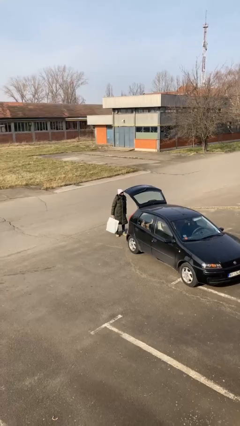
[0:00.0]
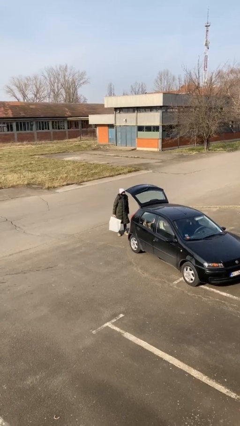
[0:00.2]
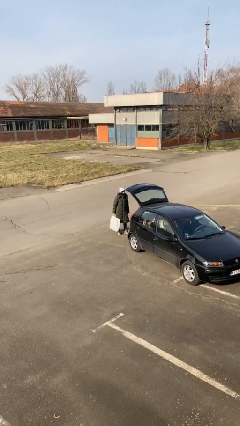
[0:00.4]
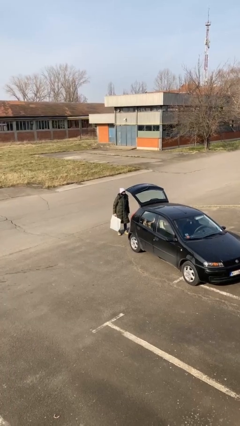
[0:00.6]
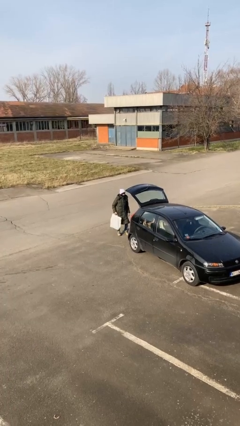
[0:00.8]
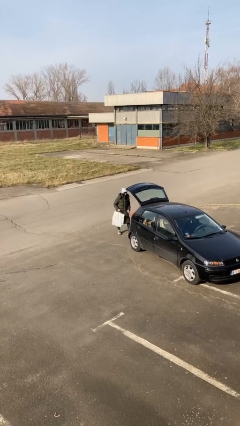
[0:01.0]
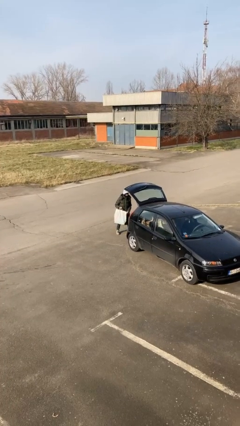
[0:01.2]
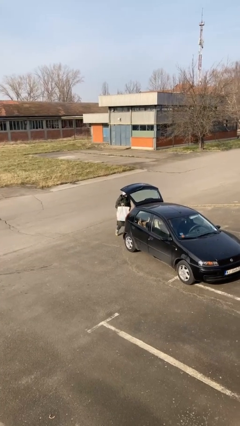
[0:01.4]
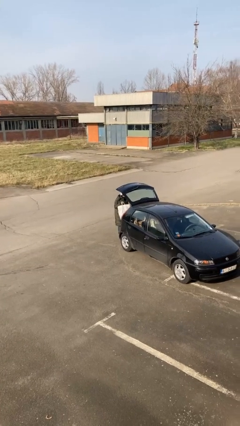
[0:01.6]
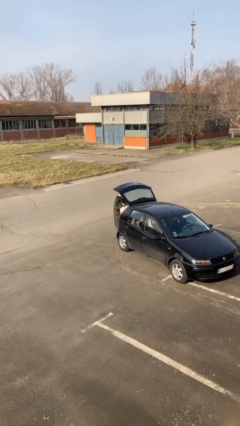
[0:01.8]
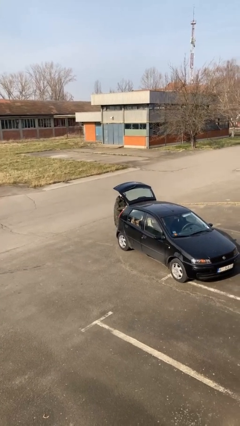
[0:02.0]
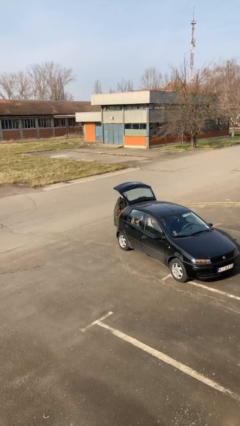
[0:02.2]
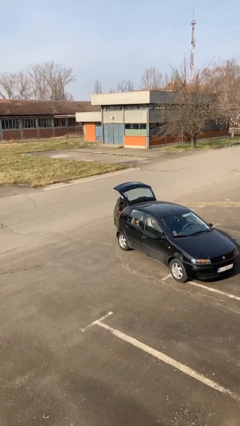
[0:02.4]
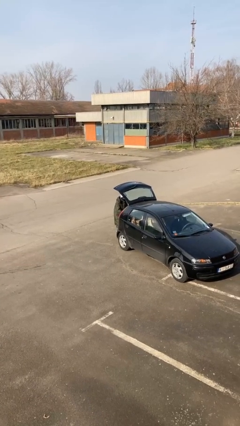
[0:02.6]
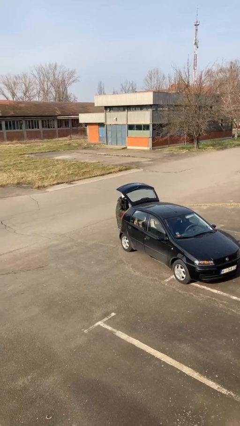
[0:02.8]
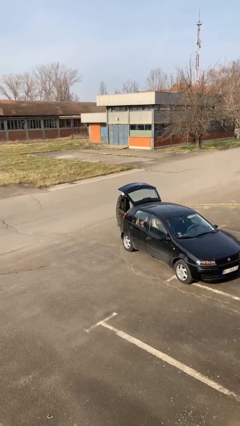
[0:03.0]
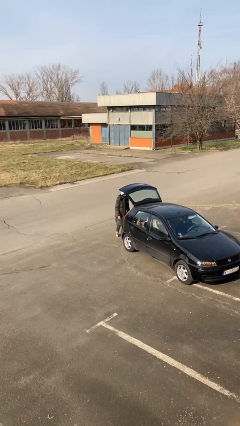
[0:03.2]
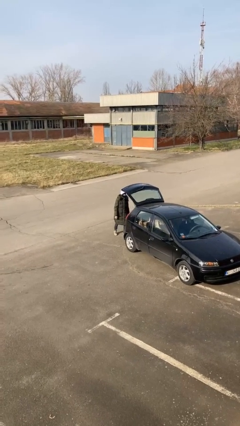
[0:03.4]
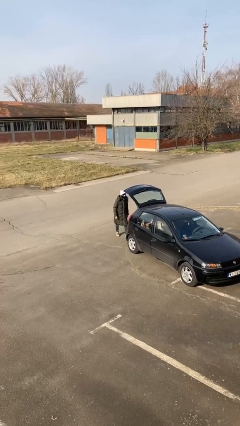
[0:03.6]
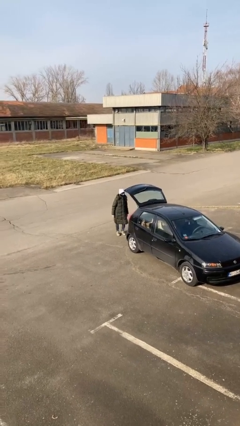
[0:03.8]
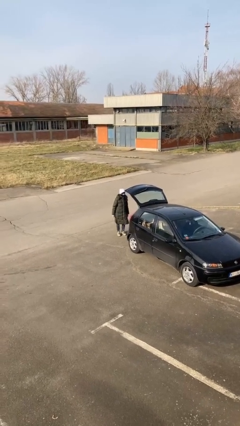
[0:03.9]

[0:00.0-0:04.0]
person loads car

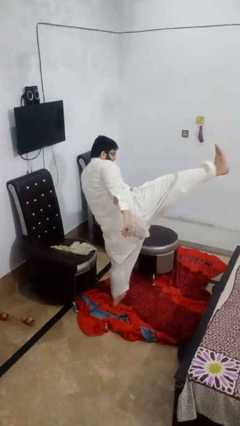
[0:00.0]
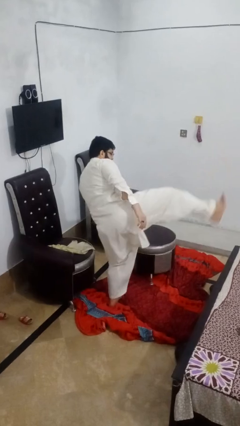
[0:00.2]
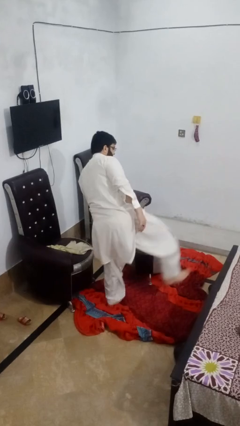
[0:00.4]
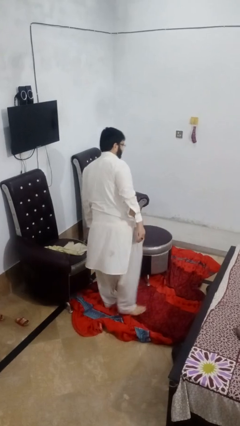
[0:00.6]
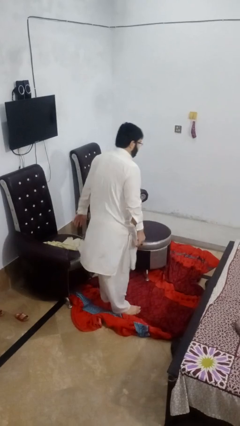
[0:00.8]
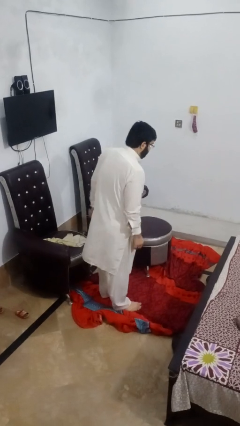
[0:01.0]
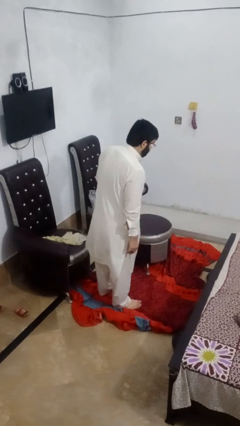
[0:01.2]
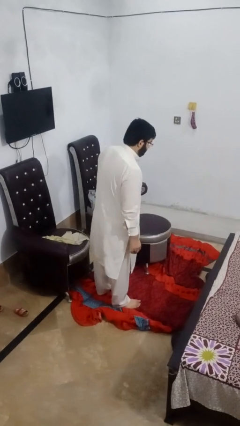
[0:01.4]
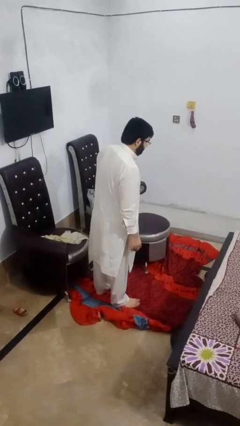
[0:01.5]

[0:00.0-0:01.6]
person karate kicks

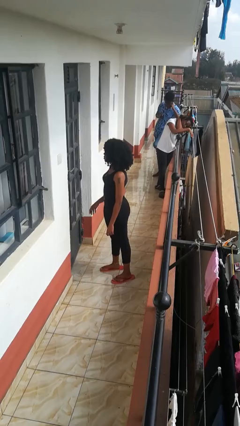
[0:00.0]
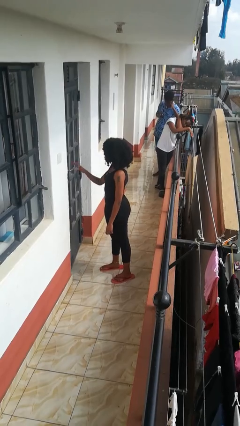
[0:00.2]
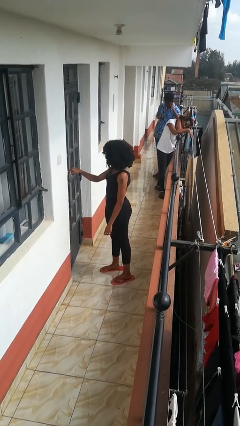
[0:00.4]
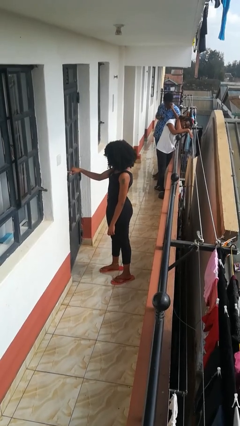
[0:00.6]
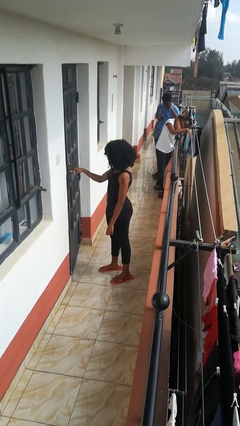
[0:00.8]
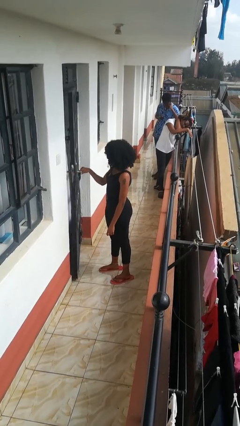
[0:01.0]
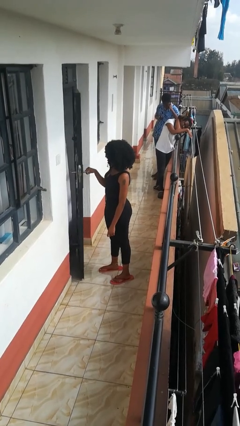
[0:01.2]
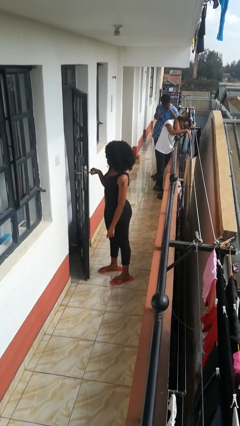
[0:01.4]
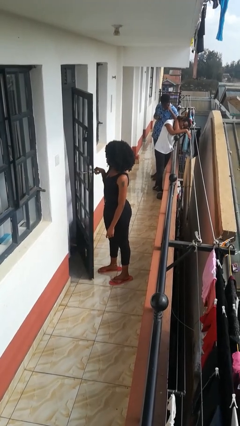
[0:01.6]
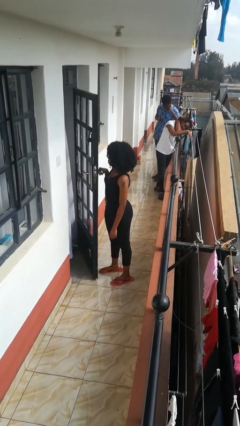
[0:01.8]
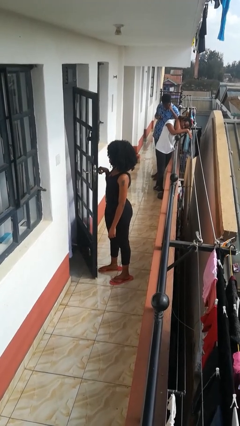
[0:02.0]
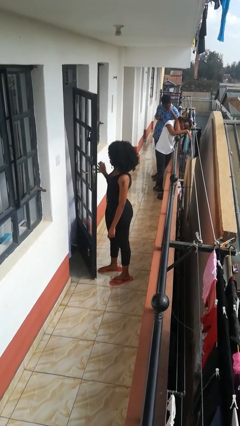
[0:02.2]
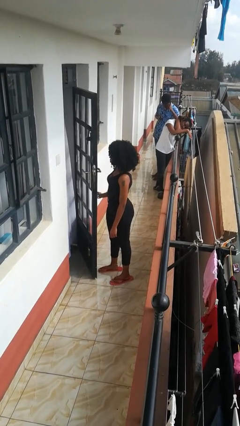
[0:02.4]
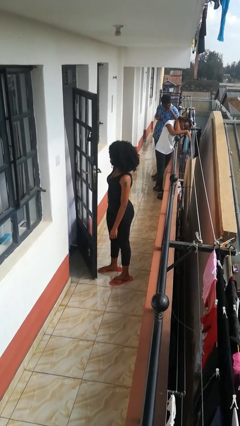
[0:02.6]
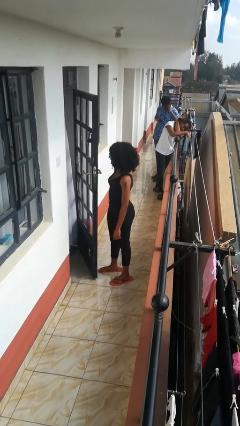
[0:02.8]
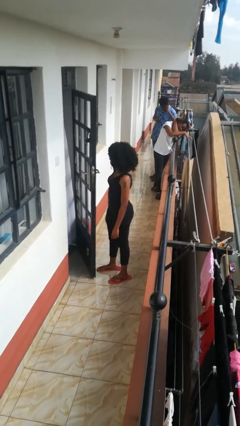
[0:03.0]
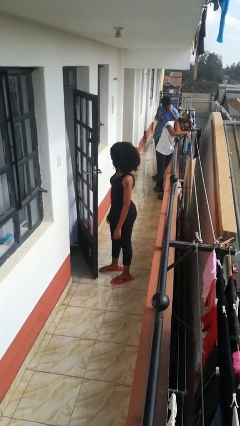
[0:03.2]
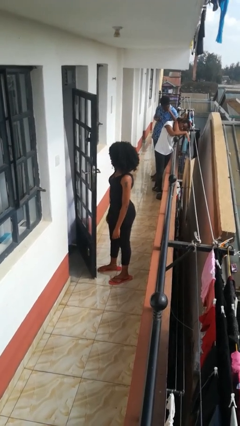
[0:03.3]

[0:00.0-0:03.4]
person opens facility door

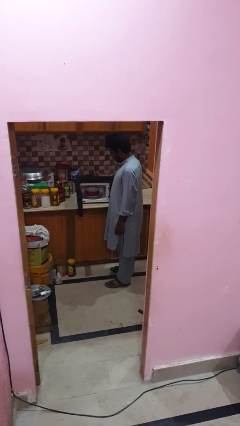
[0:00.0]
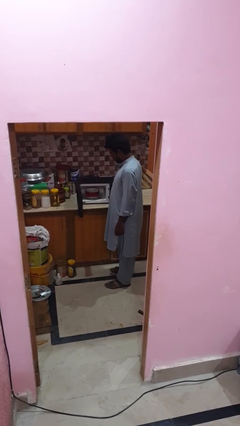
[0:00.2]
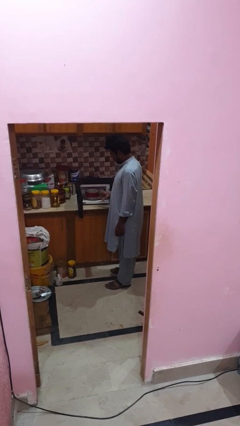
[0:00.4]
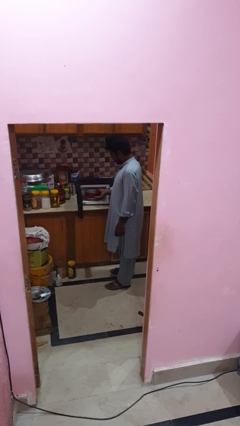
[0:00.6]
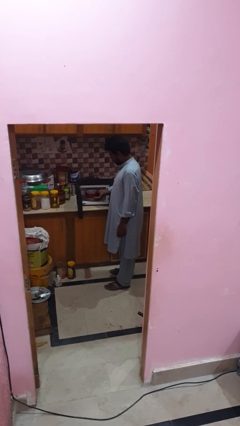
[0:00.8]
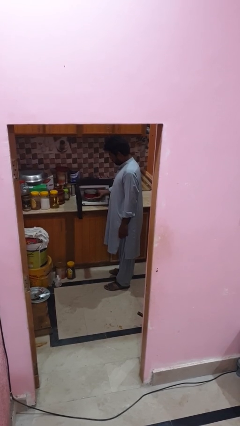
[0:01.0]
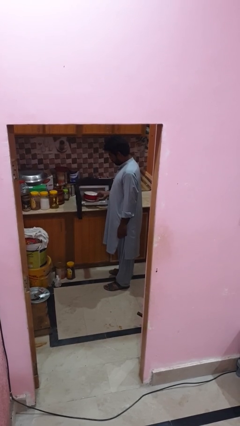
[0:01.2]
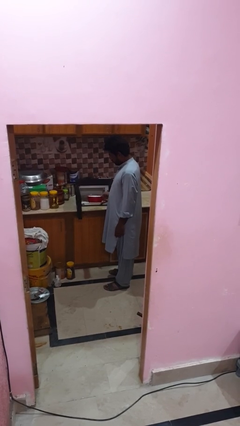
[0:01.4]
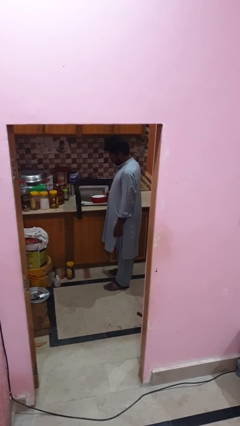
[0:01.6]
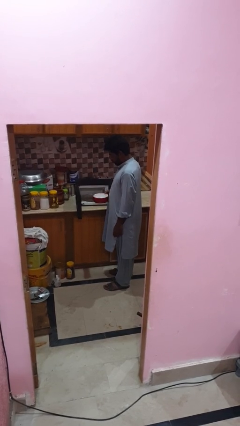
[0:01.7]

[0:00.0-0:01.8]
person takes object from microwave

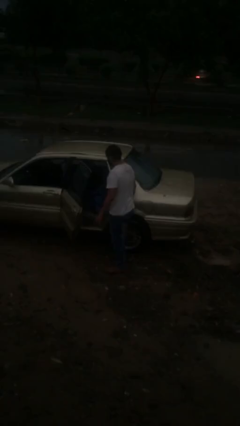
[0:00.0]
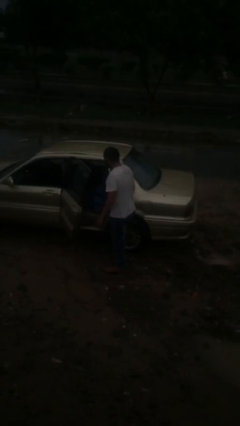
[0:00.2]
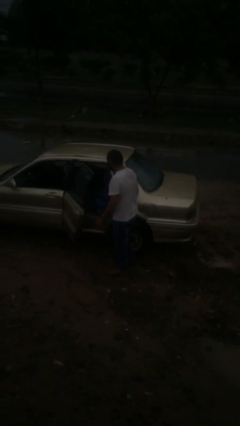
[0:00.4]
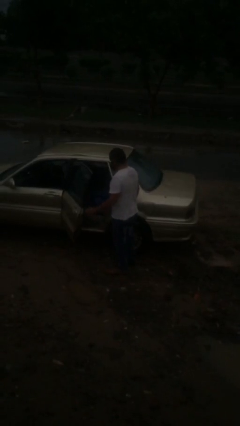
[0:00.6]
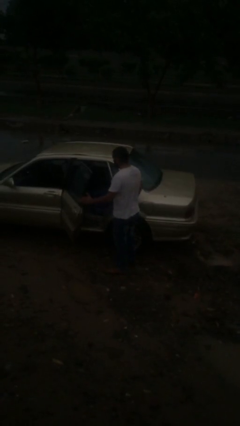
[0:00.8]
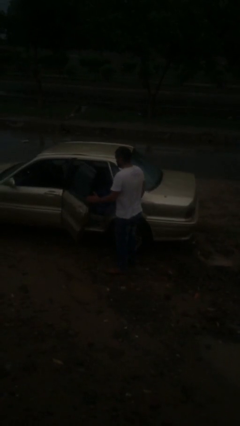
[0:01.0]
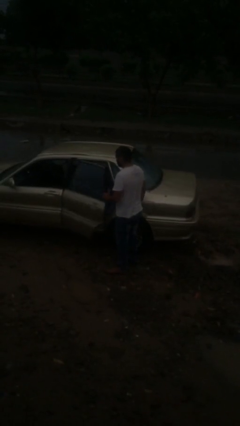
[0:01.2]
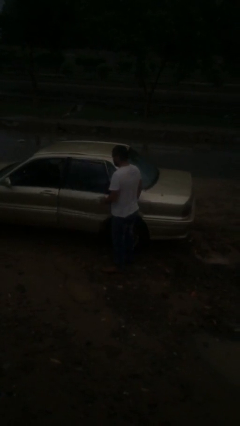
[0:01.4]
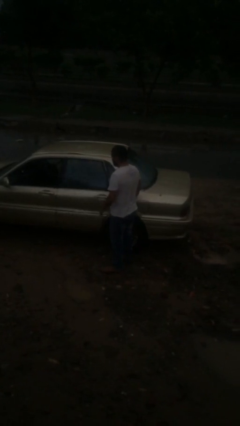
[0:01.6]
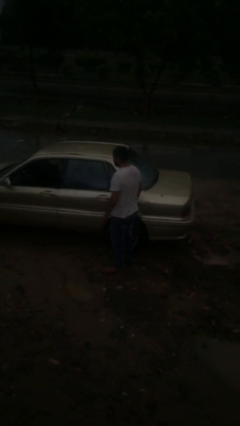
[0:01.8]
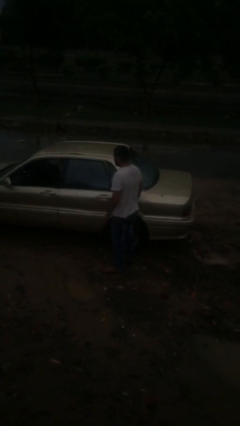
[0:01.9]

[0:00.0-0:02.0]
person closes car door

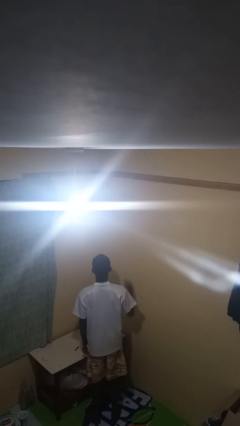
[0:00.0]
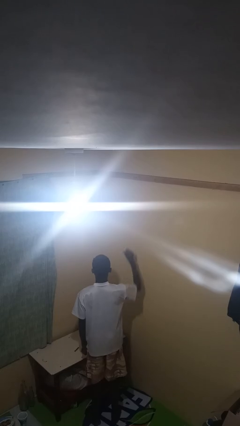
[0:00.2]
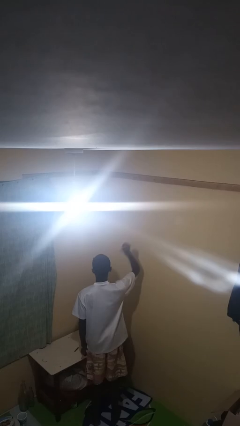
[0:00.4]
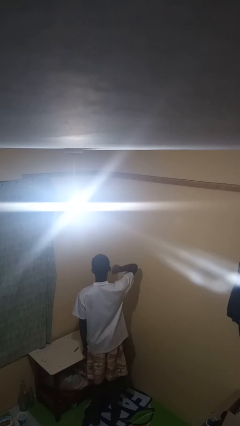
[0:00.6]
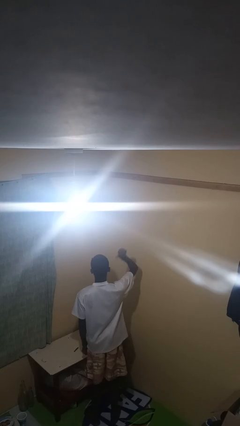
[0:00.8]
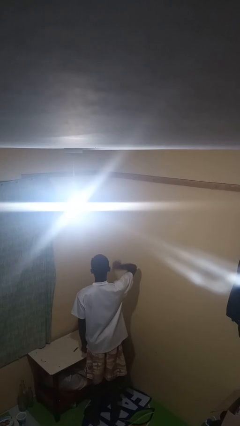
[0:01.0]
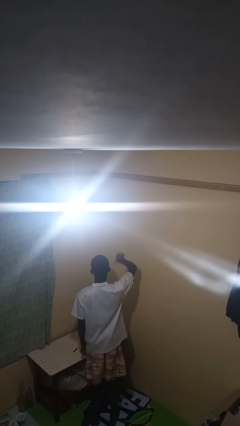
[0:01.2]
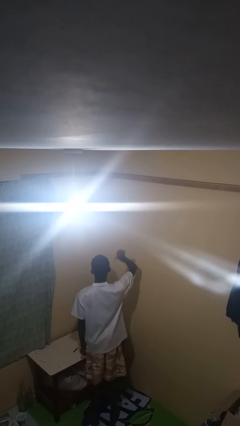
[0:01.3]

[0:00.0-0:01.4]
person gestures behind me

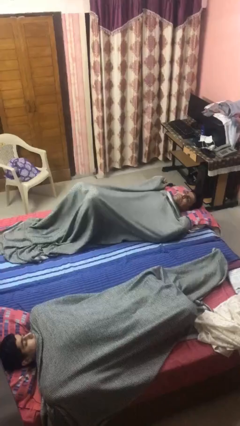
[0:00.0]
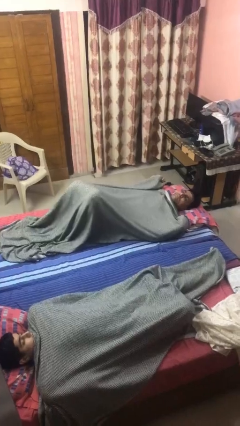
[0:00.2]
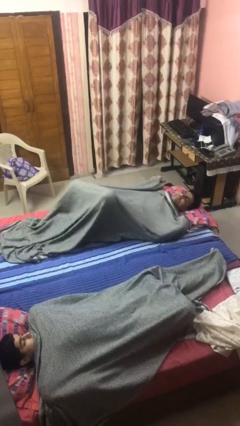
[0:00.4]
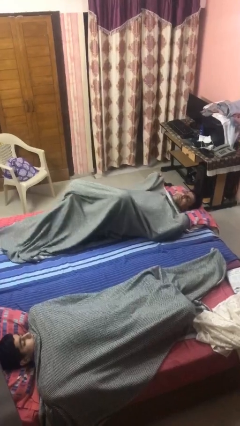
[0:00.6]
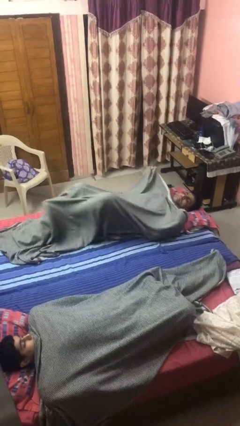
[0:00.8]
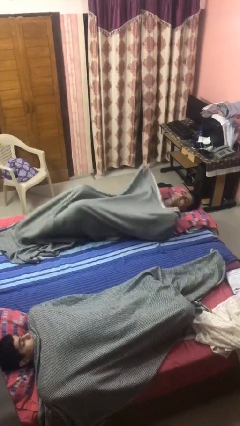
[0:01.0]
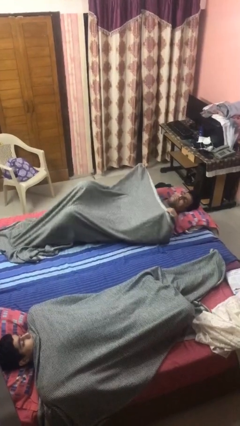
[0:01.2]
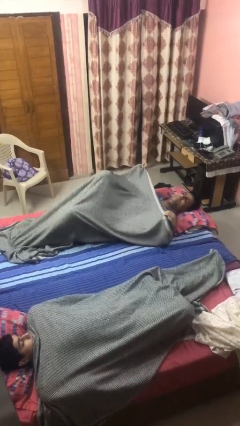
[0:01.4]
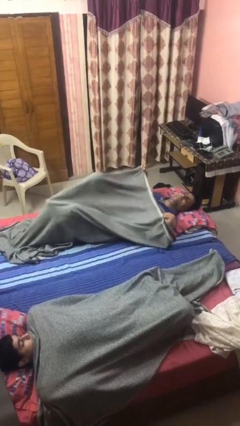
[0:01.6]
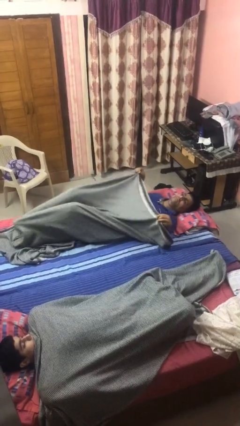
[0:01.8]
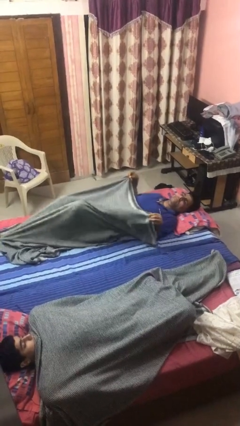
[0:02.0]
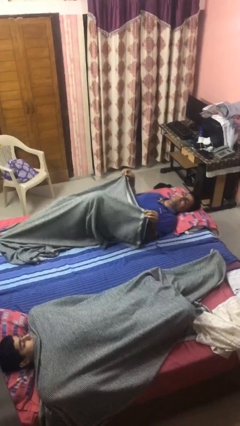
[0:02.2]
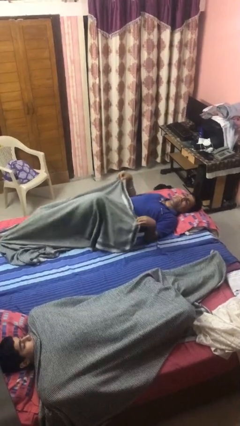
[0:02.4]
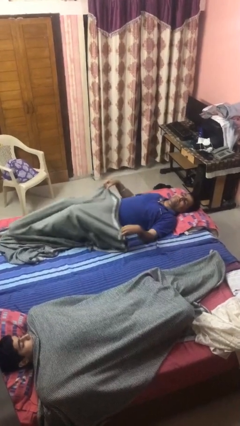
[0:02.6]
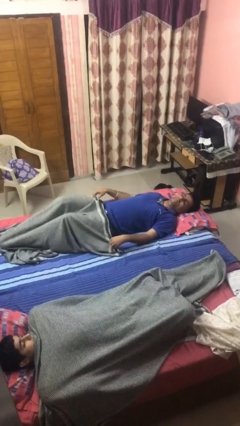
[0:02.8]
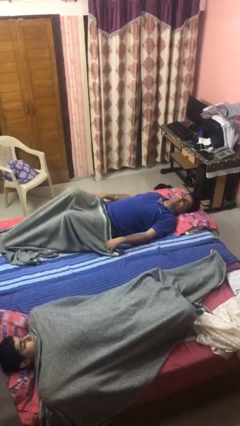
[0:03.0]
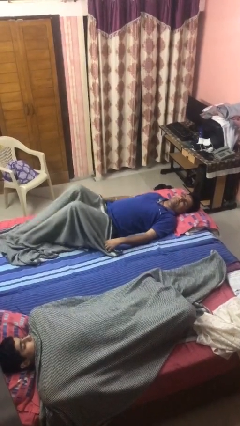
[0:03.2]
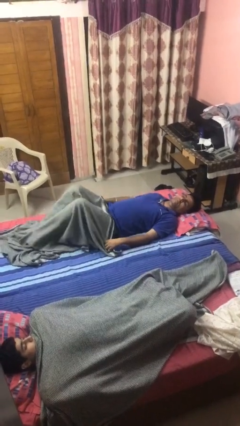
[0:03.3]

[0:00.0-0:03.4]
person uncovers with bedsheets
